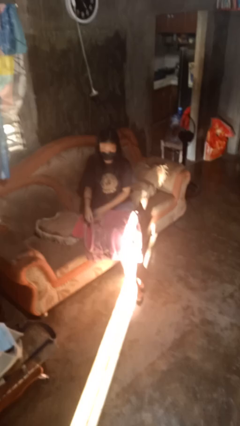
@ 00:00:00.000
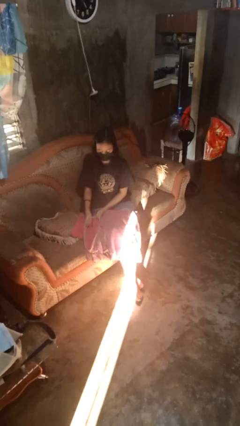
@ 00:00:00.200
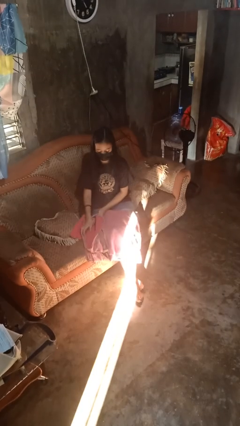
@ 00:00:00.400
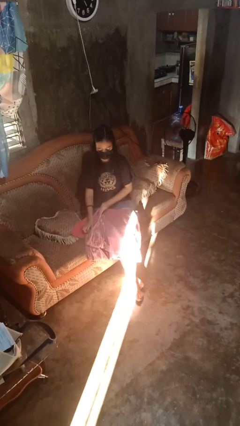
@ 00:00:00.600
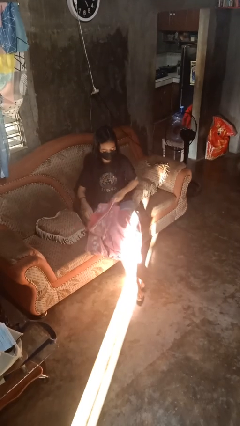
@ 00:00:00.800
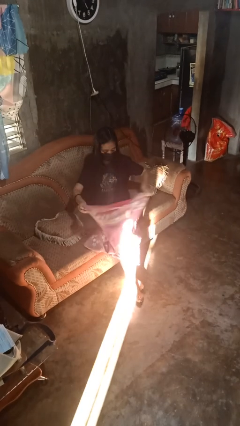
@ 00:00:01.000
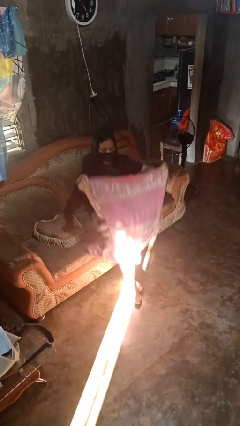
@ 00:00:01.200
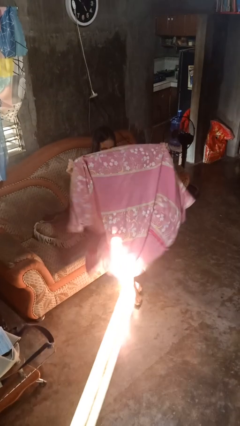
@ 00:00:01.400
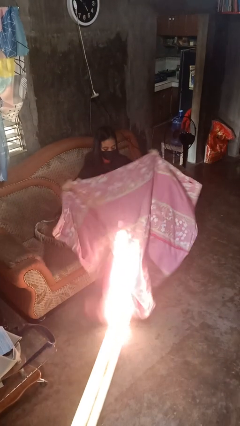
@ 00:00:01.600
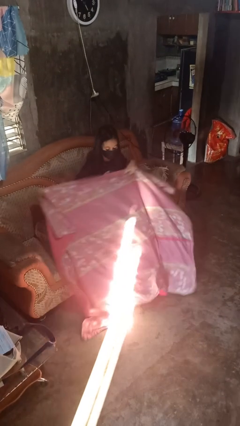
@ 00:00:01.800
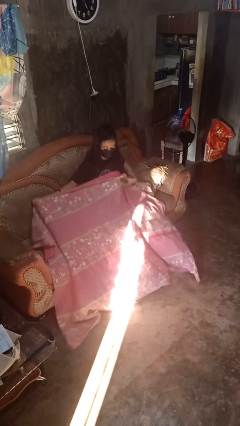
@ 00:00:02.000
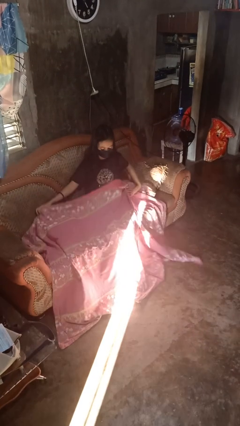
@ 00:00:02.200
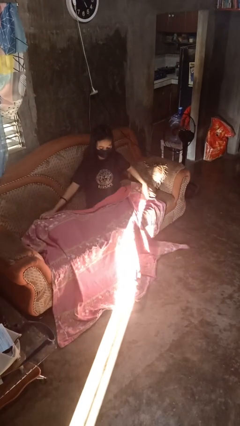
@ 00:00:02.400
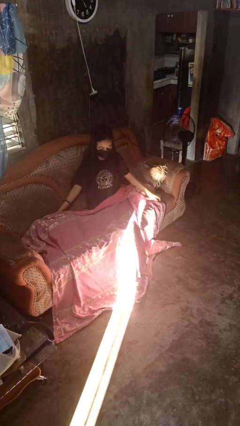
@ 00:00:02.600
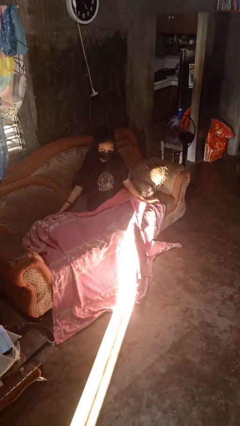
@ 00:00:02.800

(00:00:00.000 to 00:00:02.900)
person unfolds blanket

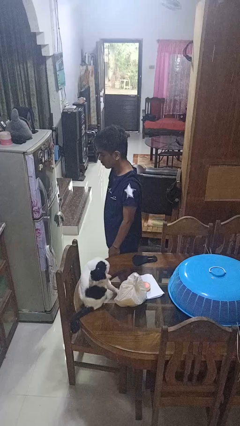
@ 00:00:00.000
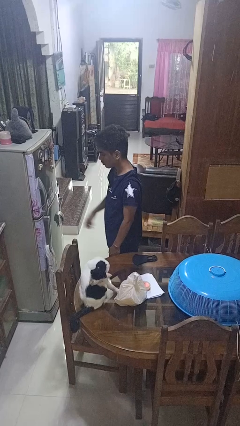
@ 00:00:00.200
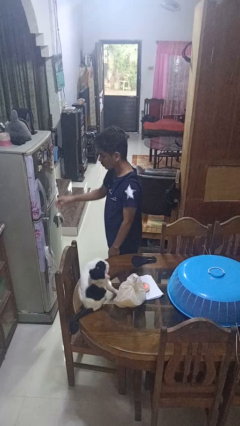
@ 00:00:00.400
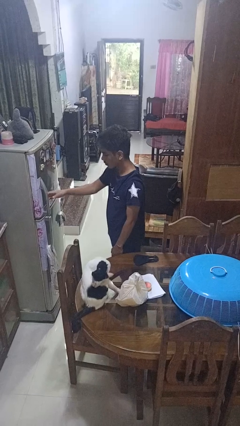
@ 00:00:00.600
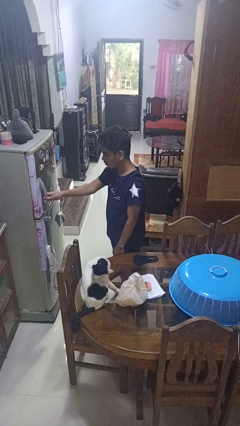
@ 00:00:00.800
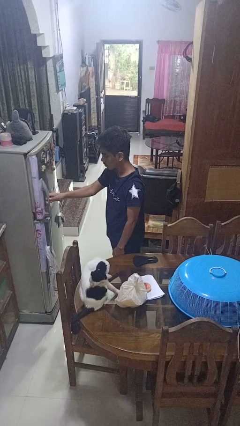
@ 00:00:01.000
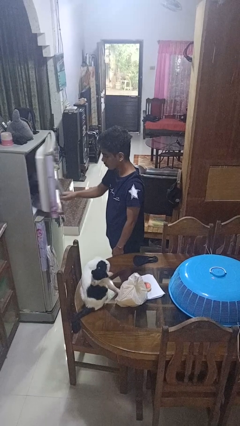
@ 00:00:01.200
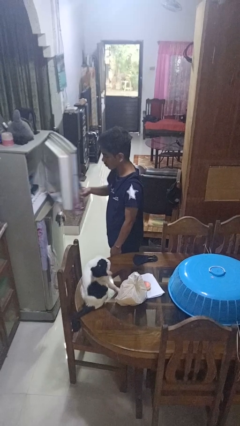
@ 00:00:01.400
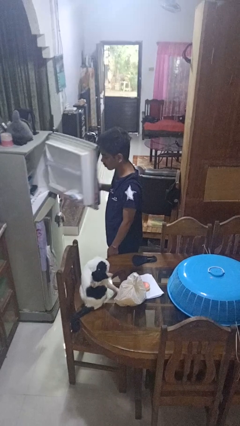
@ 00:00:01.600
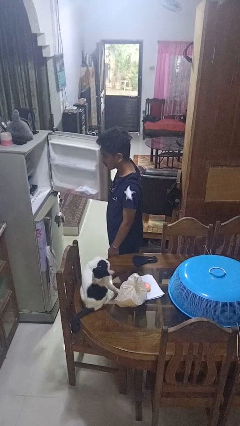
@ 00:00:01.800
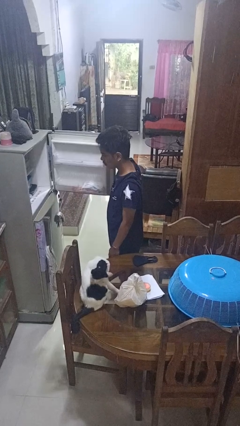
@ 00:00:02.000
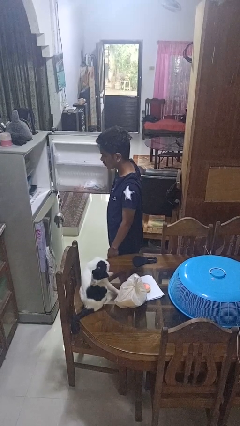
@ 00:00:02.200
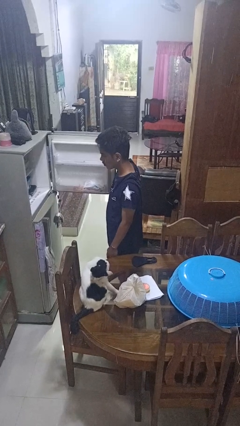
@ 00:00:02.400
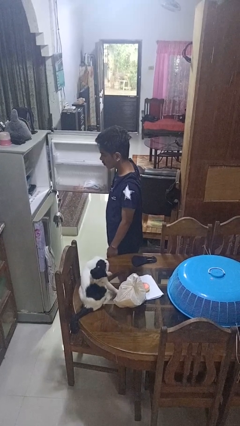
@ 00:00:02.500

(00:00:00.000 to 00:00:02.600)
person opens refrigerator

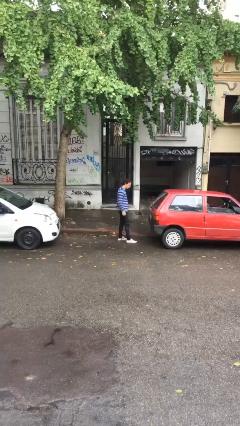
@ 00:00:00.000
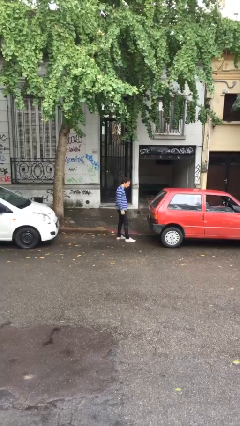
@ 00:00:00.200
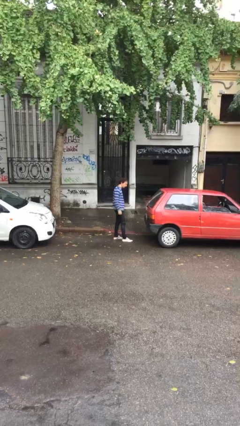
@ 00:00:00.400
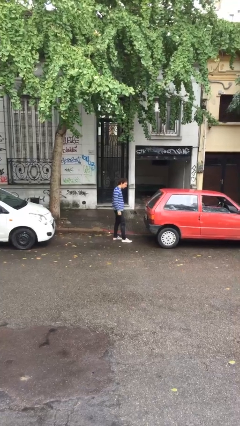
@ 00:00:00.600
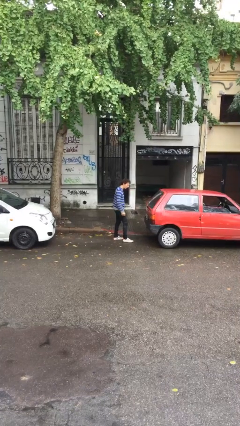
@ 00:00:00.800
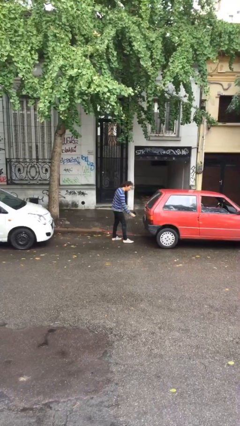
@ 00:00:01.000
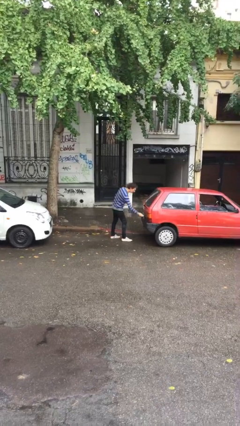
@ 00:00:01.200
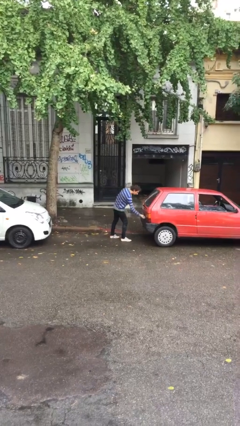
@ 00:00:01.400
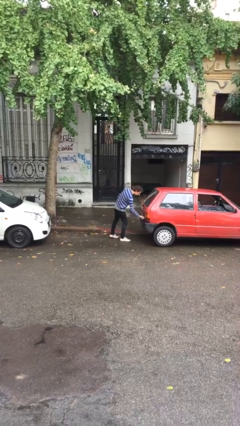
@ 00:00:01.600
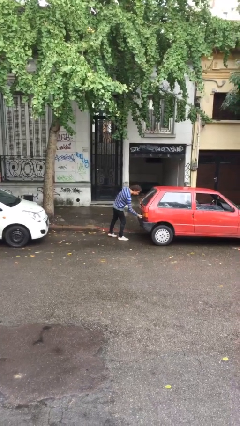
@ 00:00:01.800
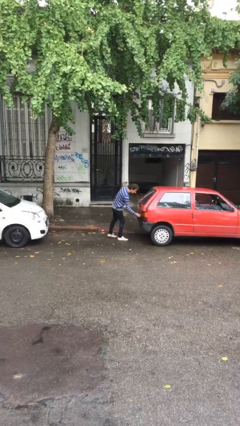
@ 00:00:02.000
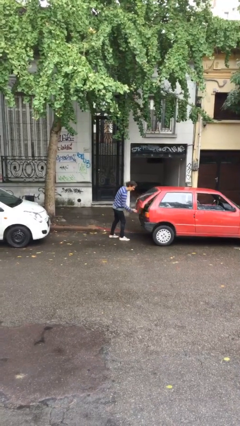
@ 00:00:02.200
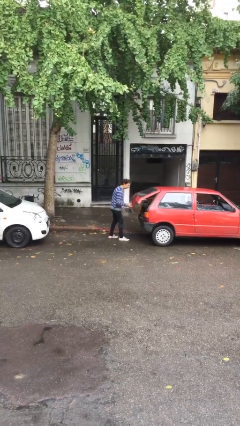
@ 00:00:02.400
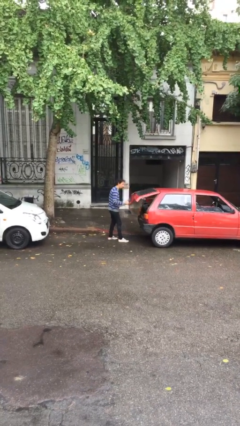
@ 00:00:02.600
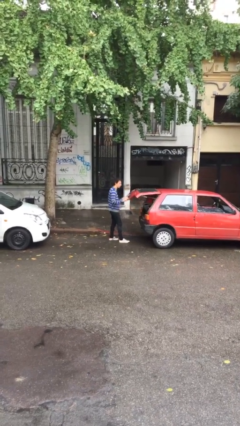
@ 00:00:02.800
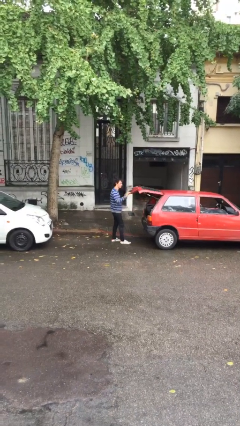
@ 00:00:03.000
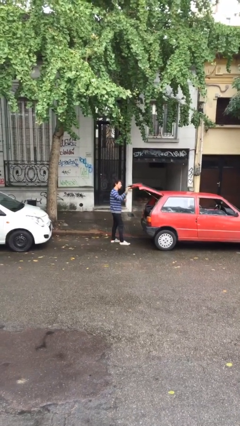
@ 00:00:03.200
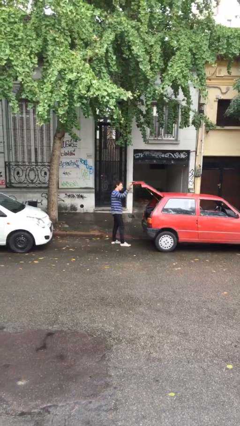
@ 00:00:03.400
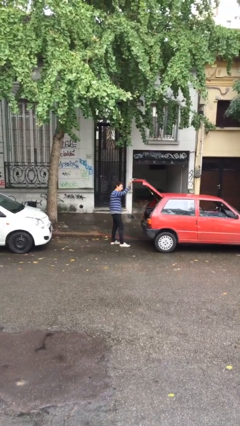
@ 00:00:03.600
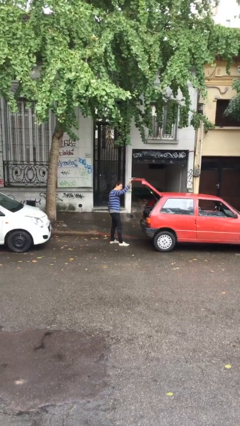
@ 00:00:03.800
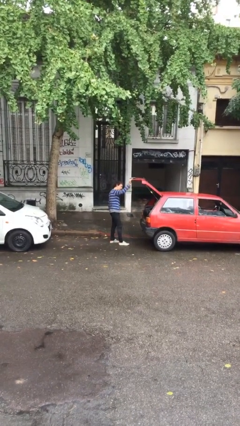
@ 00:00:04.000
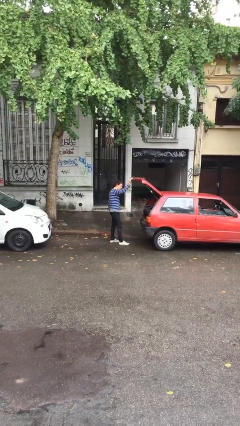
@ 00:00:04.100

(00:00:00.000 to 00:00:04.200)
person opens car trunk

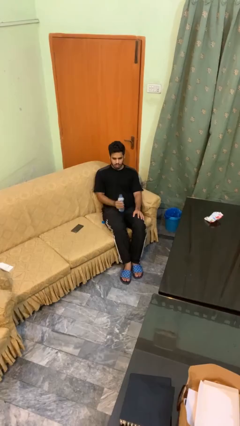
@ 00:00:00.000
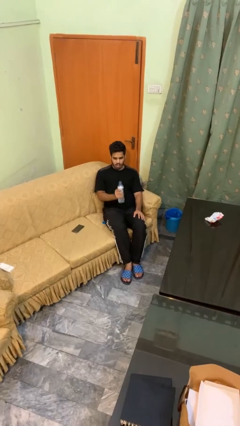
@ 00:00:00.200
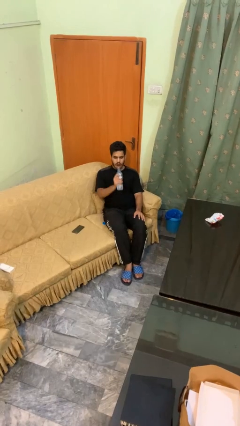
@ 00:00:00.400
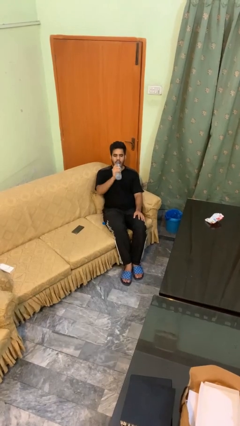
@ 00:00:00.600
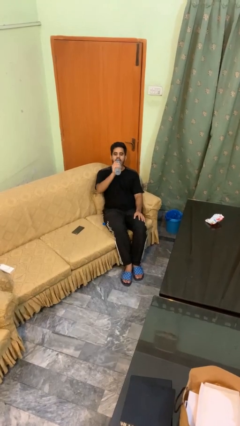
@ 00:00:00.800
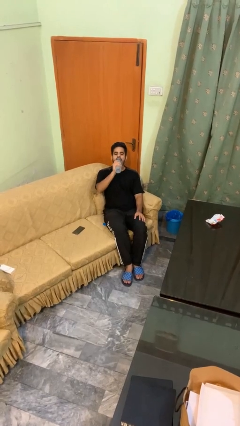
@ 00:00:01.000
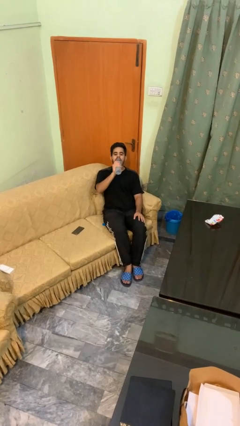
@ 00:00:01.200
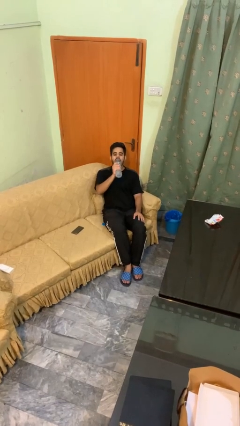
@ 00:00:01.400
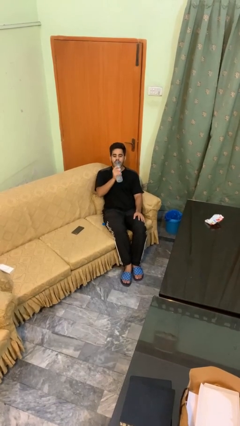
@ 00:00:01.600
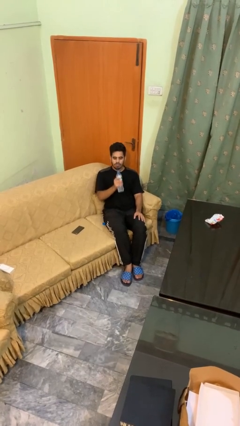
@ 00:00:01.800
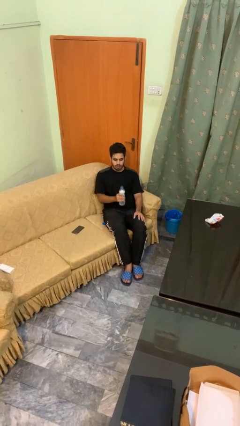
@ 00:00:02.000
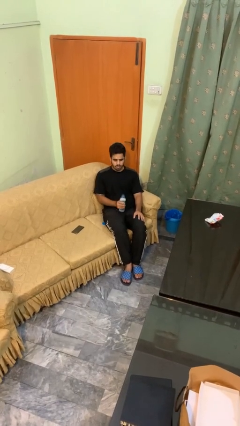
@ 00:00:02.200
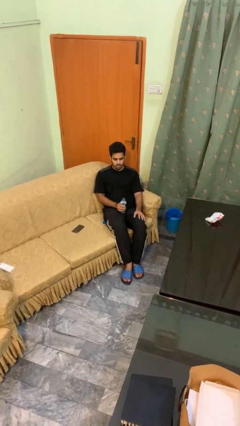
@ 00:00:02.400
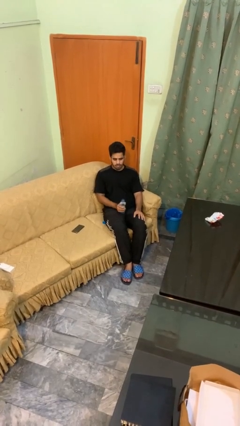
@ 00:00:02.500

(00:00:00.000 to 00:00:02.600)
person drinks from bottle

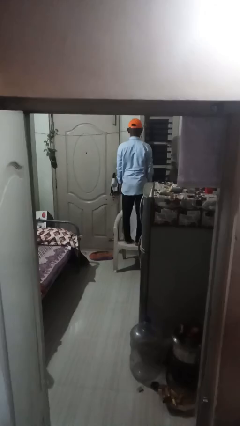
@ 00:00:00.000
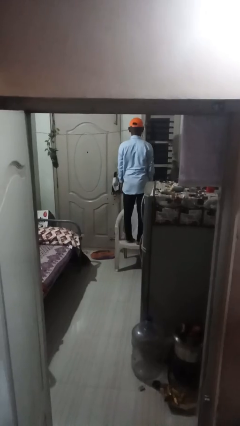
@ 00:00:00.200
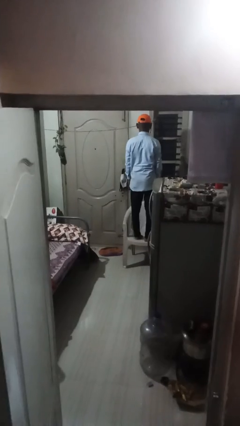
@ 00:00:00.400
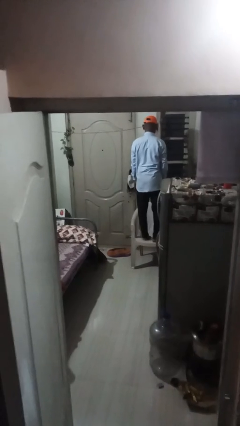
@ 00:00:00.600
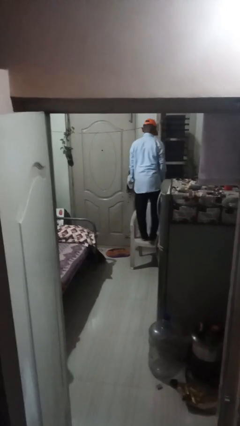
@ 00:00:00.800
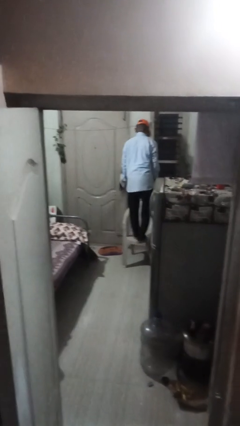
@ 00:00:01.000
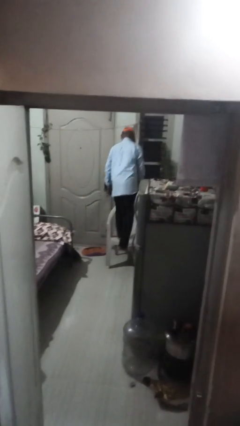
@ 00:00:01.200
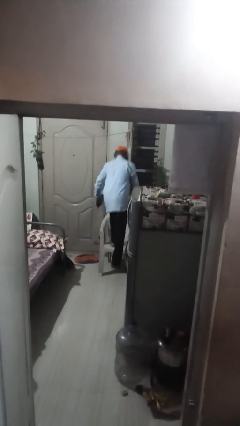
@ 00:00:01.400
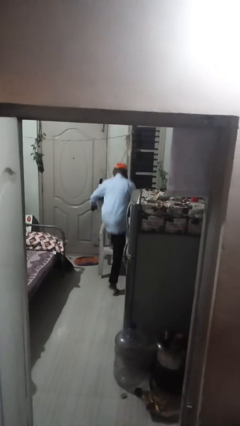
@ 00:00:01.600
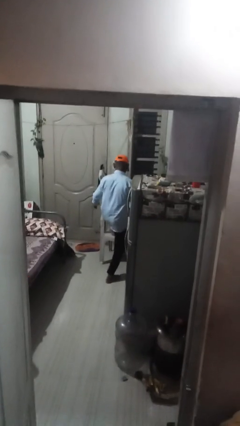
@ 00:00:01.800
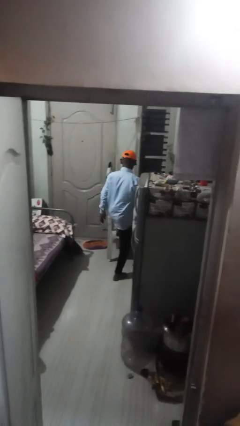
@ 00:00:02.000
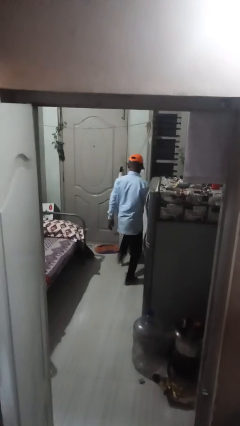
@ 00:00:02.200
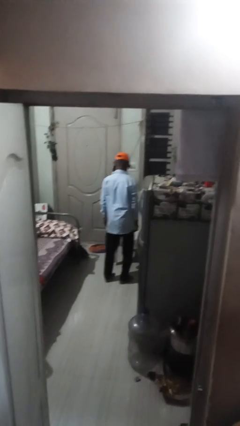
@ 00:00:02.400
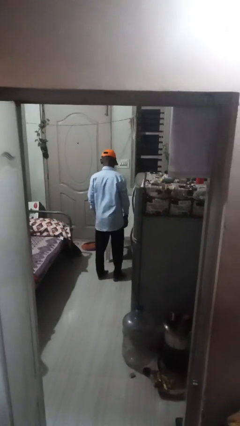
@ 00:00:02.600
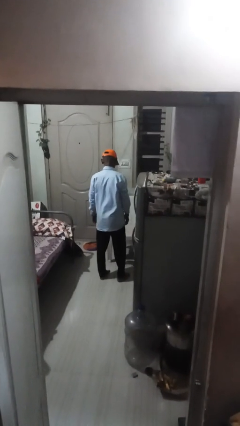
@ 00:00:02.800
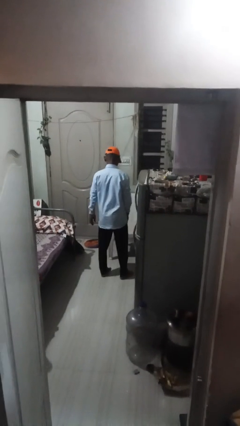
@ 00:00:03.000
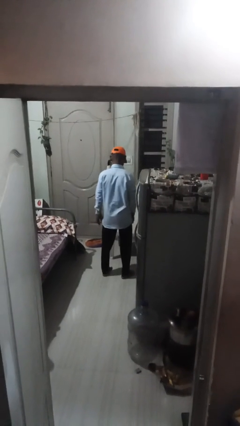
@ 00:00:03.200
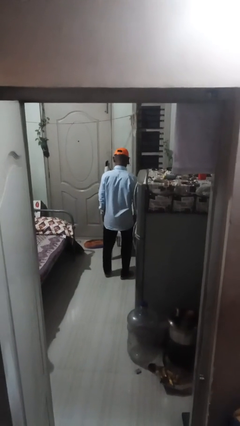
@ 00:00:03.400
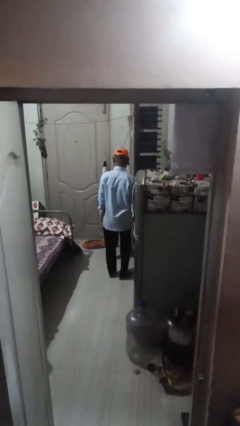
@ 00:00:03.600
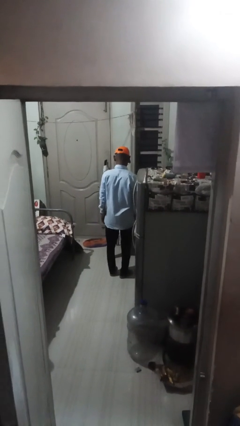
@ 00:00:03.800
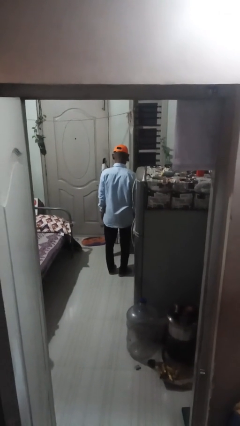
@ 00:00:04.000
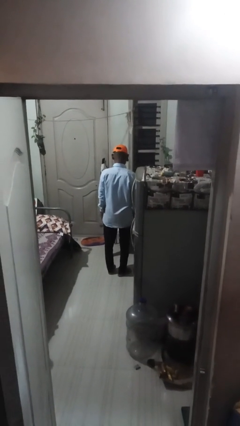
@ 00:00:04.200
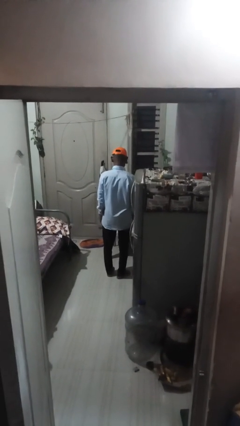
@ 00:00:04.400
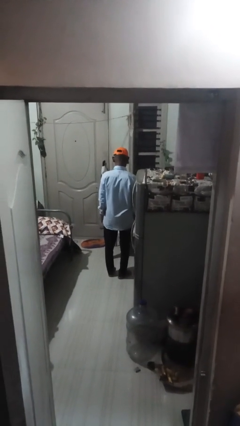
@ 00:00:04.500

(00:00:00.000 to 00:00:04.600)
person climbs off chair

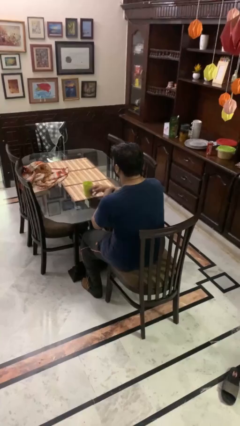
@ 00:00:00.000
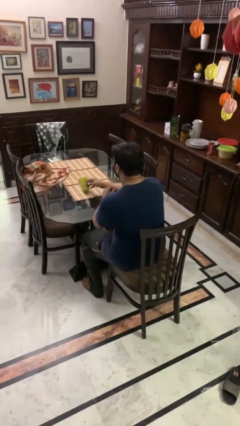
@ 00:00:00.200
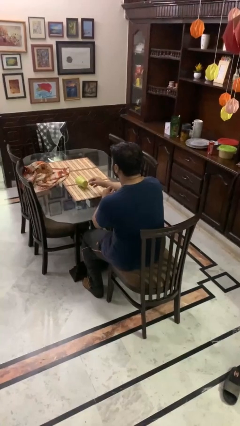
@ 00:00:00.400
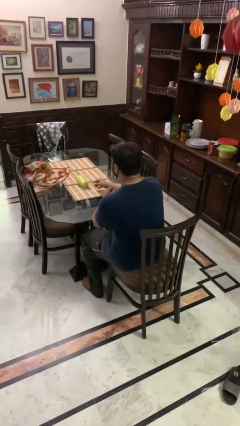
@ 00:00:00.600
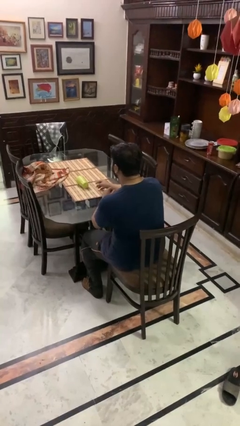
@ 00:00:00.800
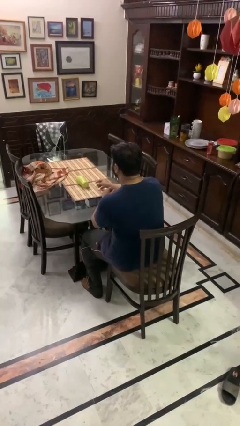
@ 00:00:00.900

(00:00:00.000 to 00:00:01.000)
person knocks over glass
